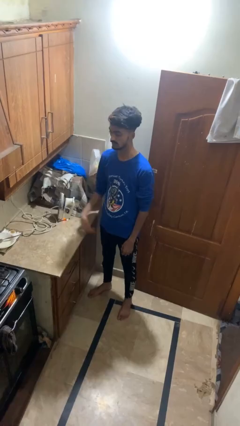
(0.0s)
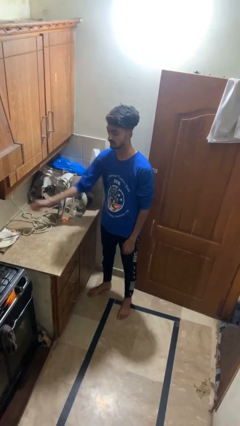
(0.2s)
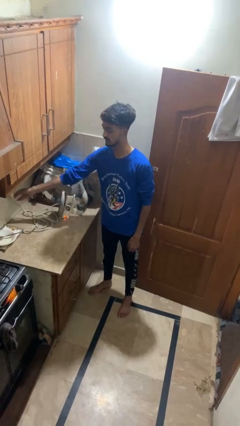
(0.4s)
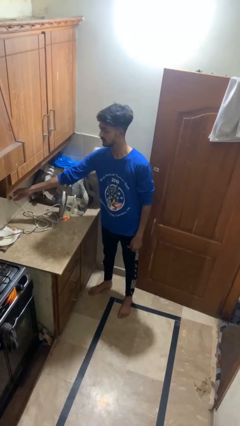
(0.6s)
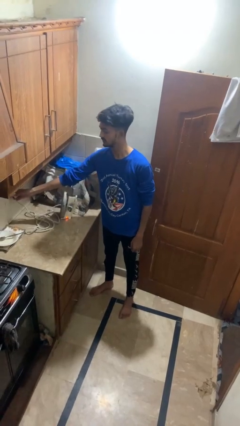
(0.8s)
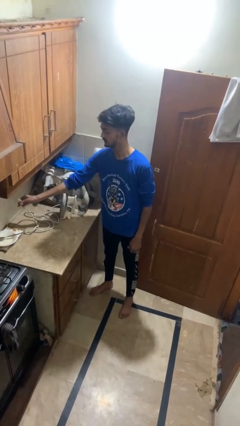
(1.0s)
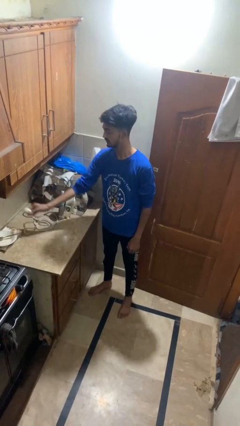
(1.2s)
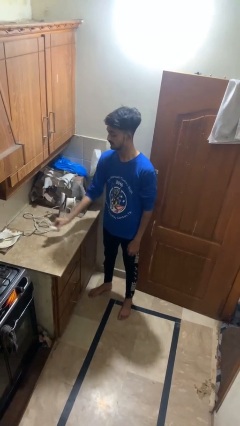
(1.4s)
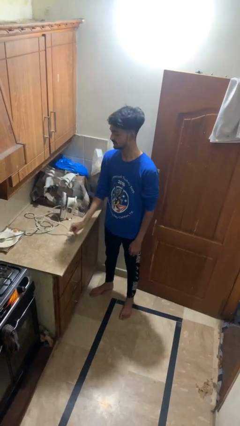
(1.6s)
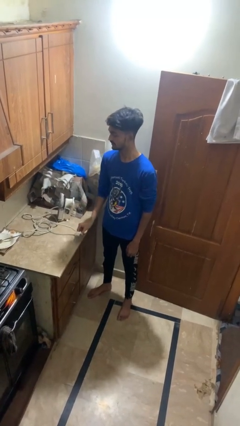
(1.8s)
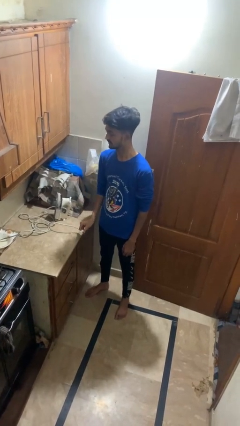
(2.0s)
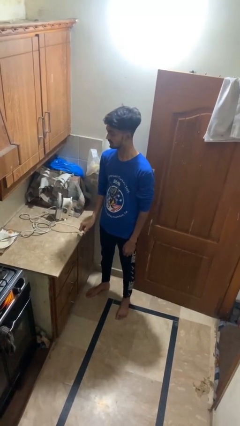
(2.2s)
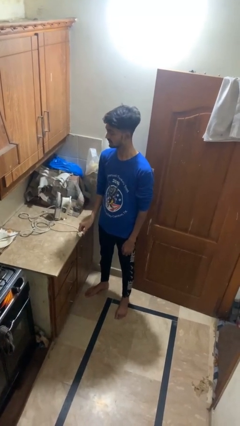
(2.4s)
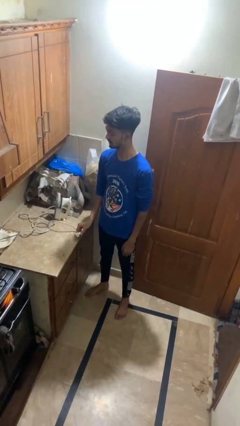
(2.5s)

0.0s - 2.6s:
person unplugs from electrical socket

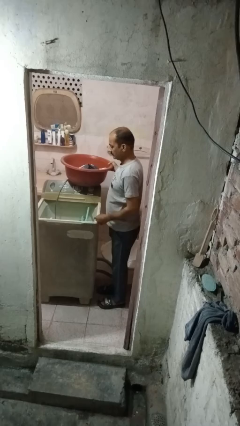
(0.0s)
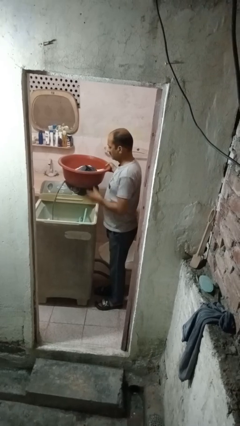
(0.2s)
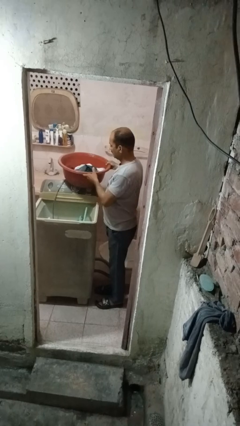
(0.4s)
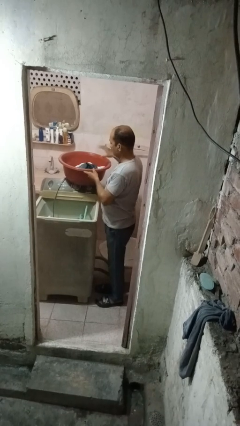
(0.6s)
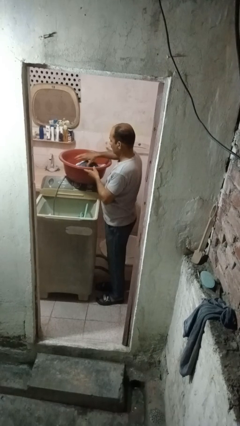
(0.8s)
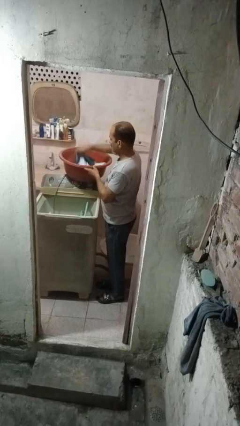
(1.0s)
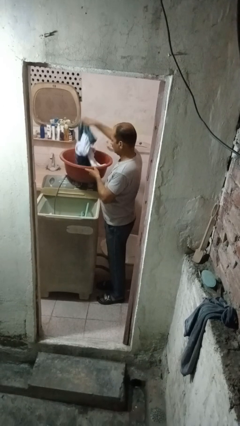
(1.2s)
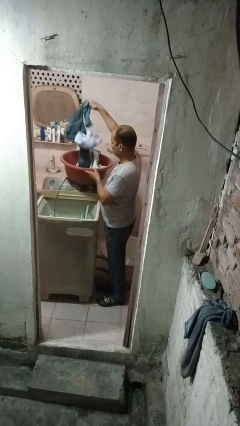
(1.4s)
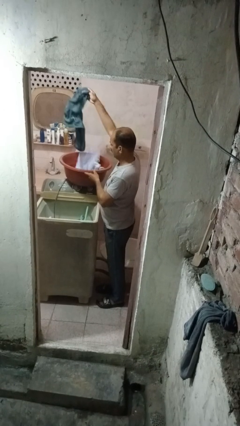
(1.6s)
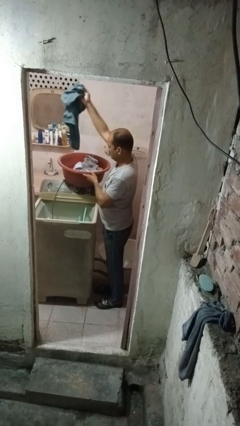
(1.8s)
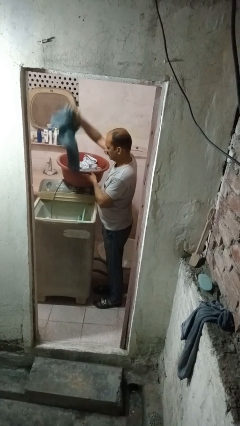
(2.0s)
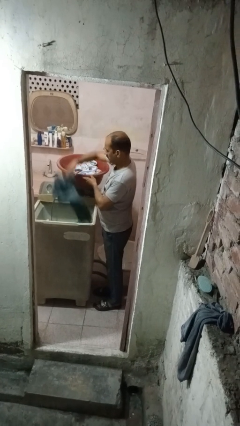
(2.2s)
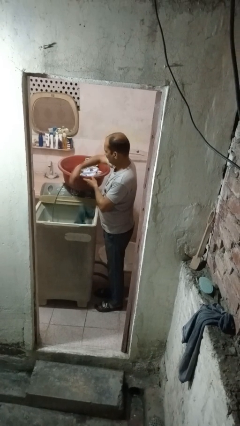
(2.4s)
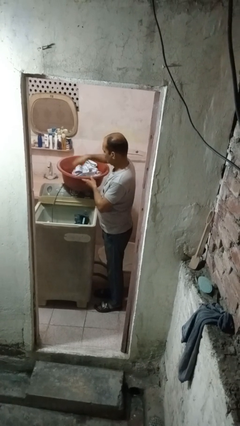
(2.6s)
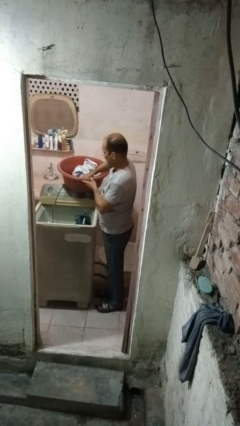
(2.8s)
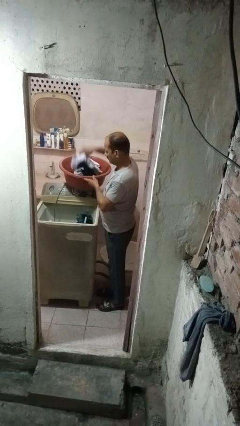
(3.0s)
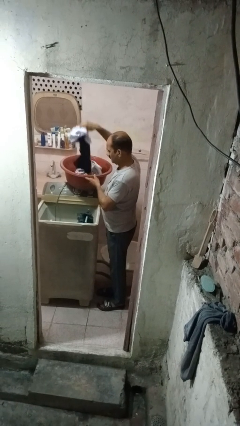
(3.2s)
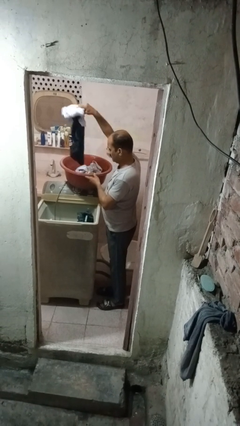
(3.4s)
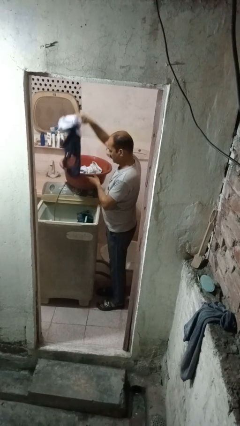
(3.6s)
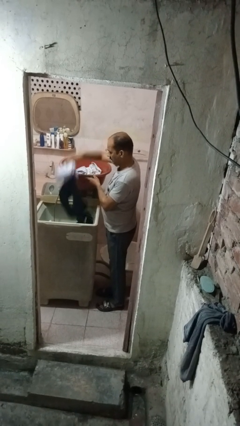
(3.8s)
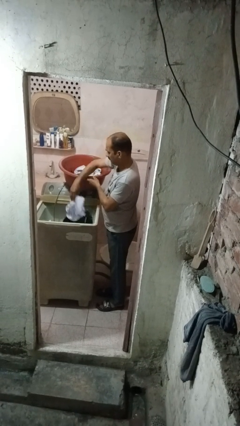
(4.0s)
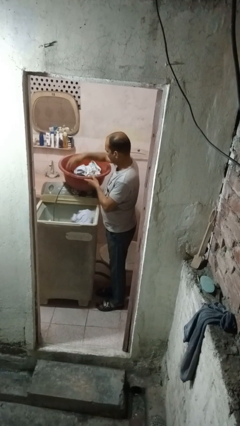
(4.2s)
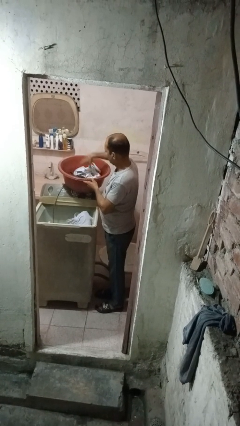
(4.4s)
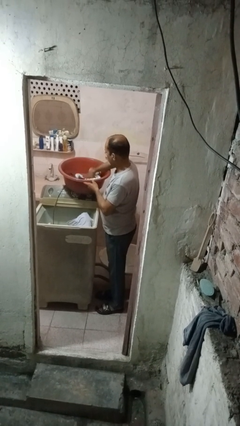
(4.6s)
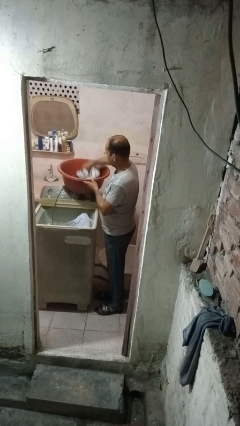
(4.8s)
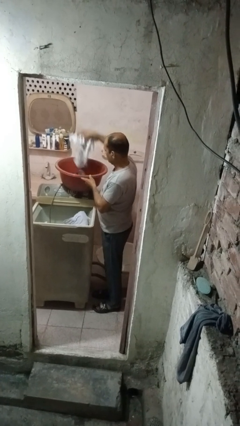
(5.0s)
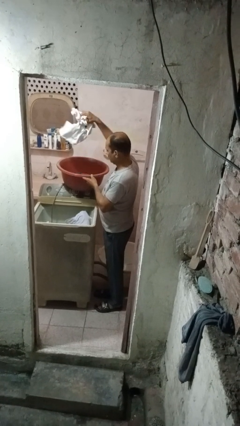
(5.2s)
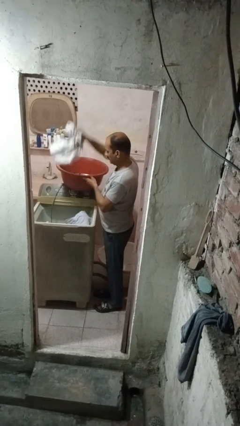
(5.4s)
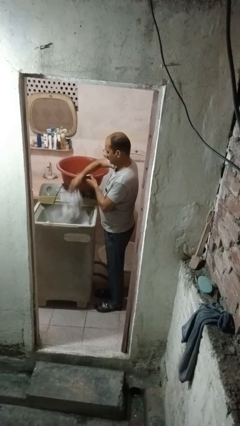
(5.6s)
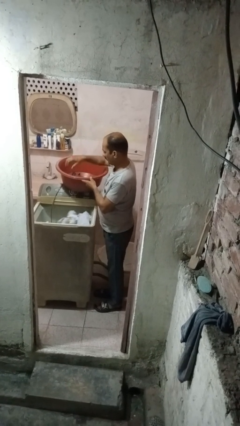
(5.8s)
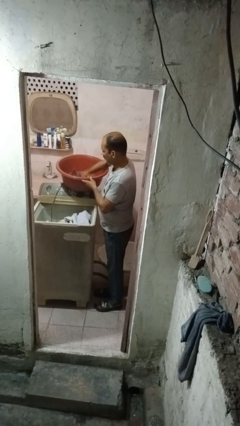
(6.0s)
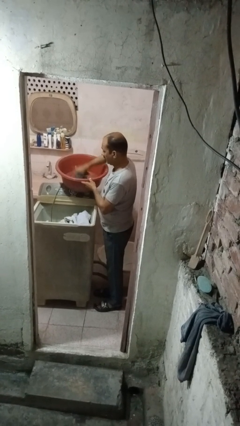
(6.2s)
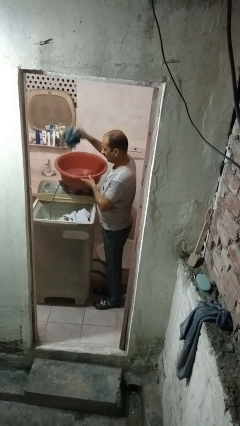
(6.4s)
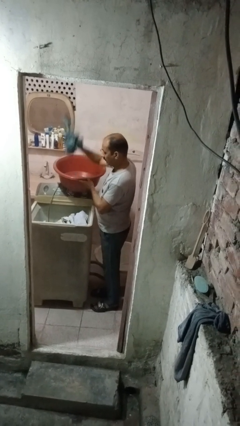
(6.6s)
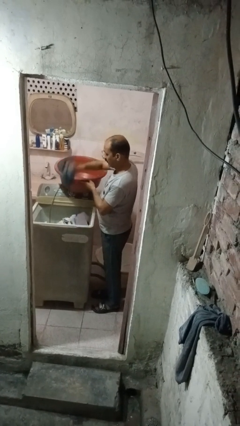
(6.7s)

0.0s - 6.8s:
person loads dishwasher

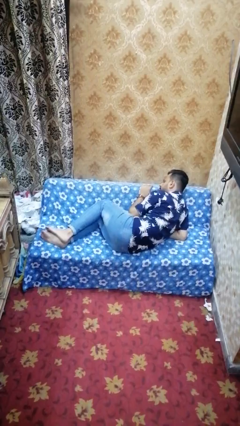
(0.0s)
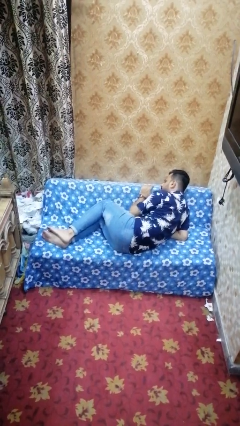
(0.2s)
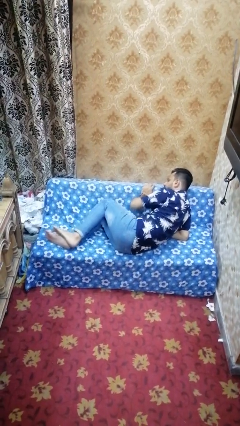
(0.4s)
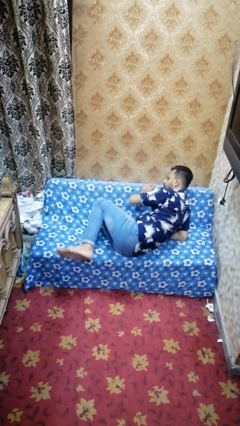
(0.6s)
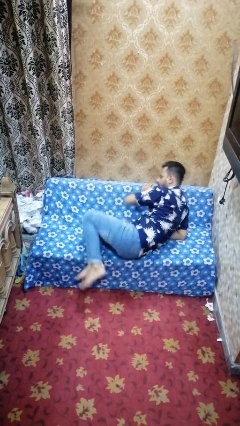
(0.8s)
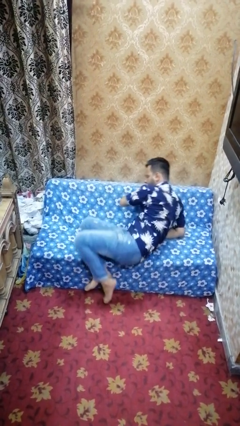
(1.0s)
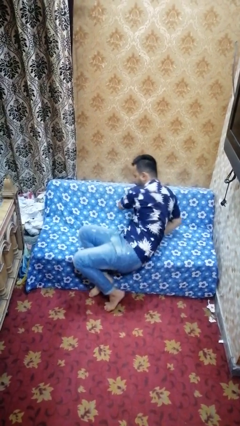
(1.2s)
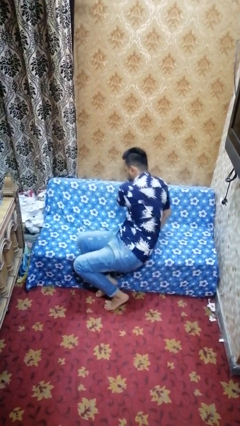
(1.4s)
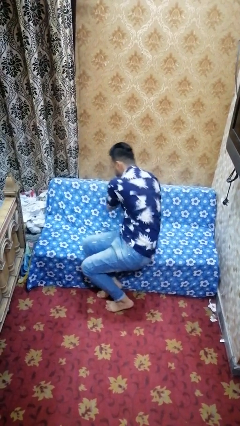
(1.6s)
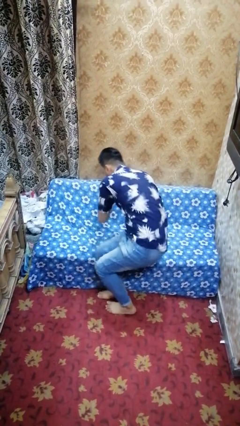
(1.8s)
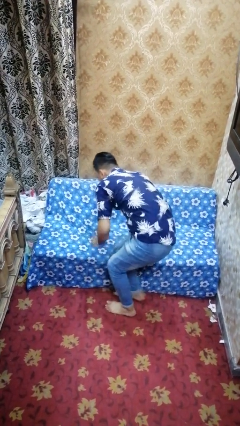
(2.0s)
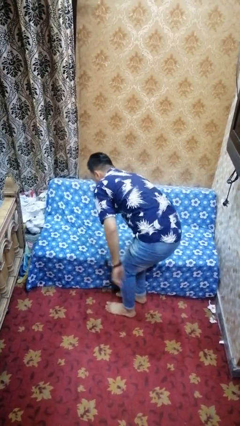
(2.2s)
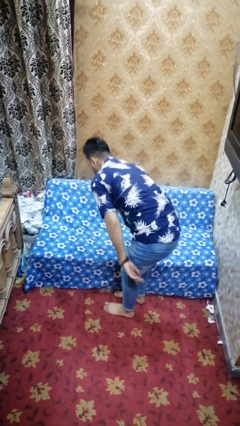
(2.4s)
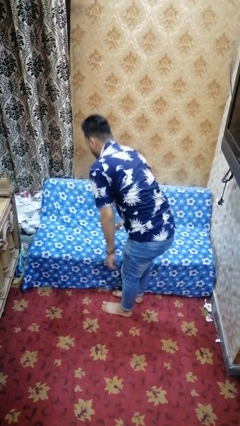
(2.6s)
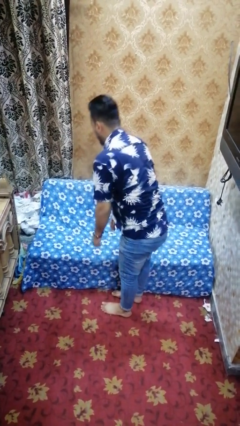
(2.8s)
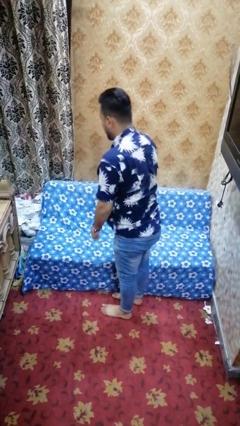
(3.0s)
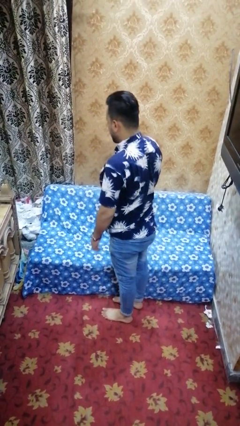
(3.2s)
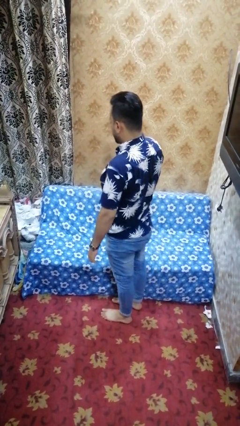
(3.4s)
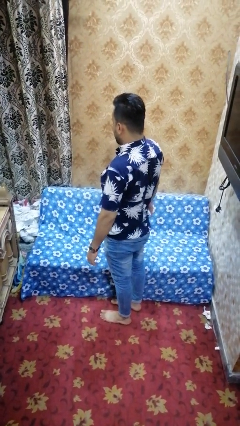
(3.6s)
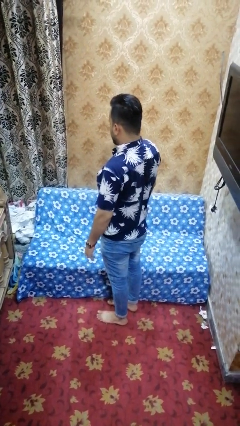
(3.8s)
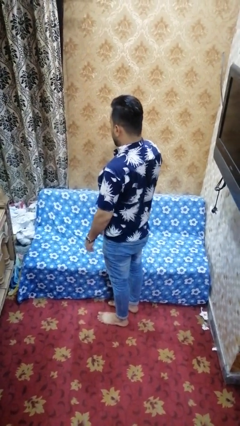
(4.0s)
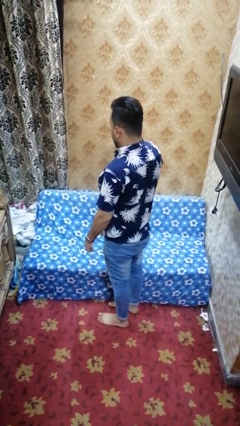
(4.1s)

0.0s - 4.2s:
person stands up

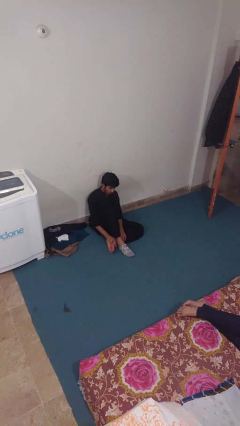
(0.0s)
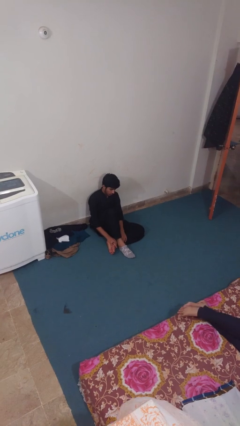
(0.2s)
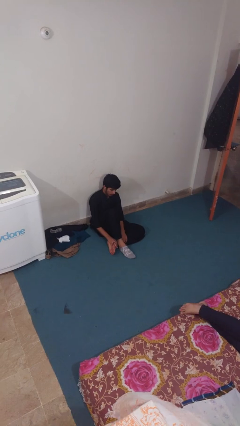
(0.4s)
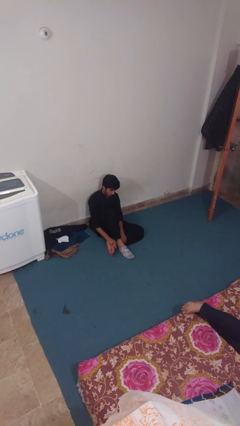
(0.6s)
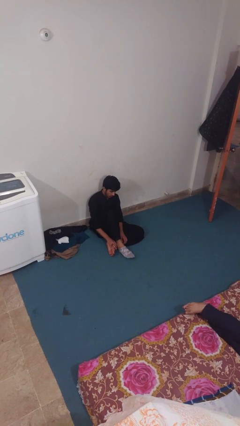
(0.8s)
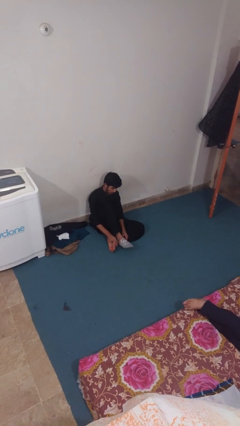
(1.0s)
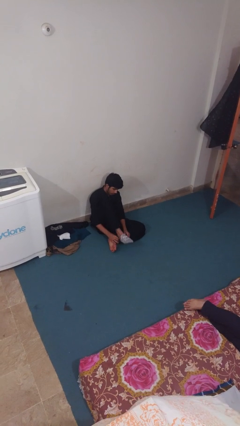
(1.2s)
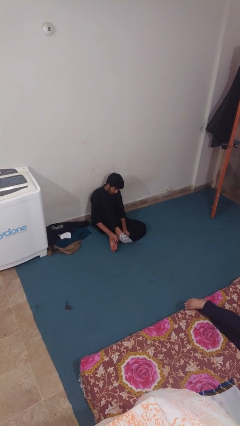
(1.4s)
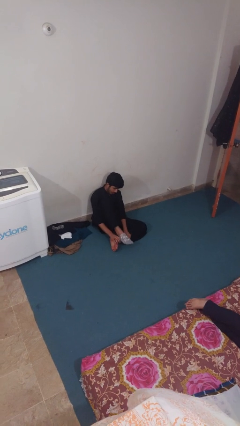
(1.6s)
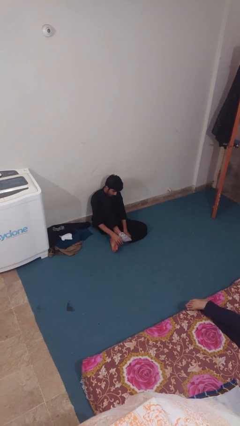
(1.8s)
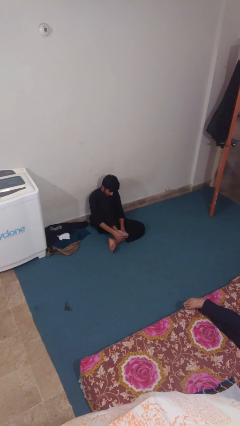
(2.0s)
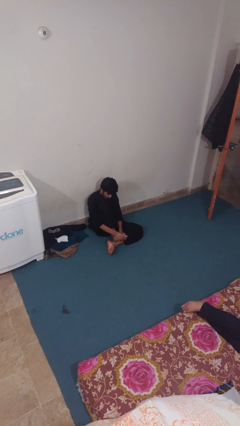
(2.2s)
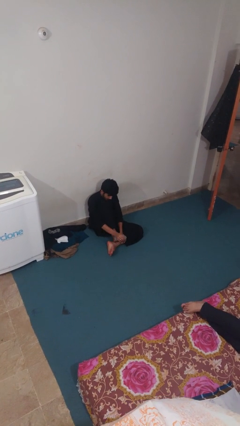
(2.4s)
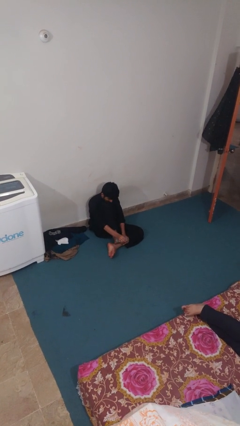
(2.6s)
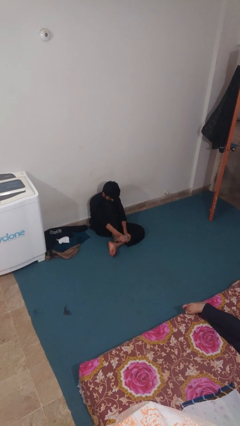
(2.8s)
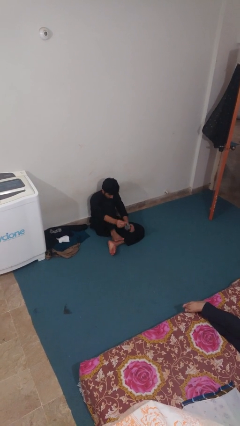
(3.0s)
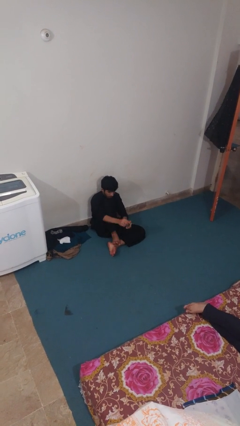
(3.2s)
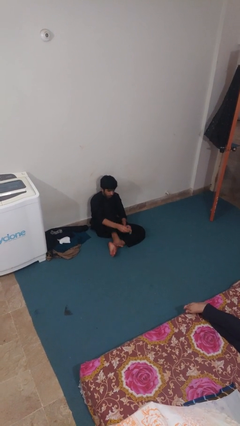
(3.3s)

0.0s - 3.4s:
person takes off socks

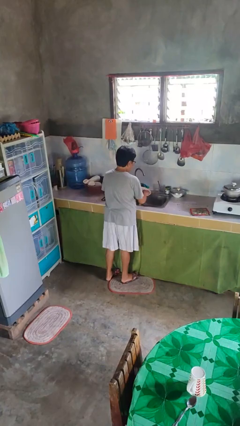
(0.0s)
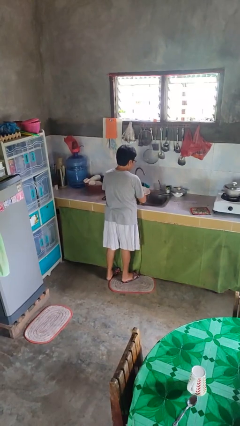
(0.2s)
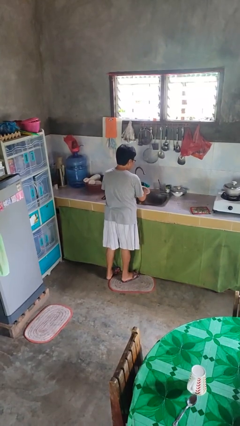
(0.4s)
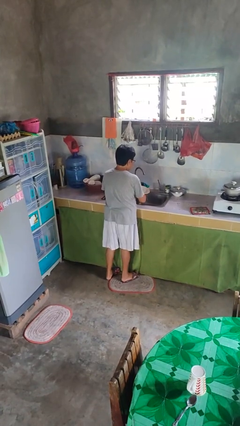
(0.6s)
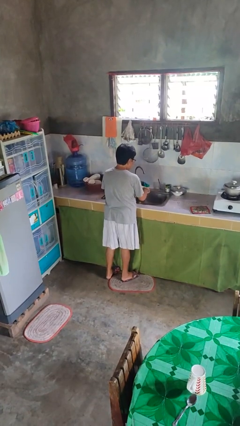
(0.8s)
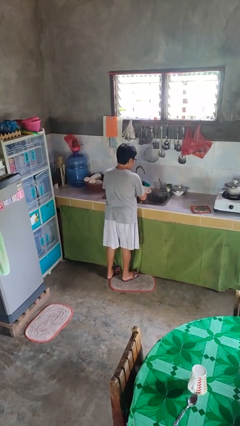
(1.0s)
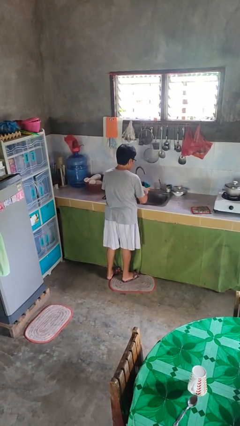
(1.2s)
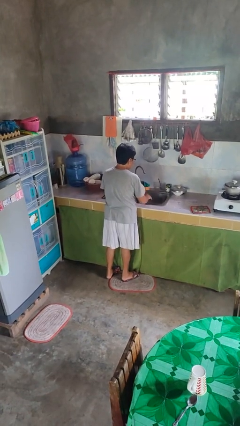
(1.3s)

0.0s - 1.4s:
person washes dish
